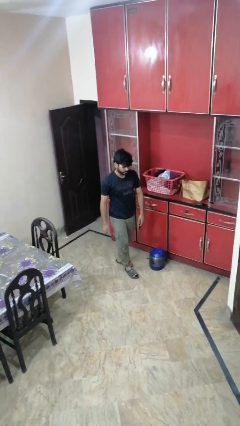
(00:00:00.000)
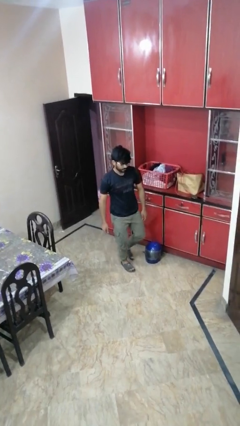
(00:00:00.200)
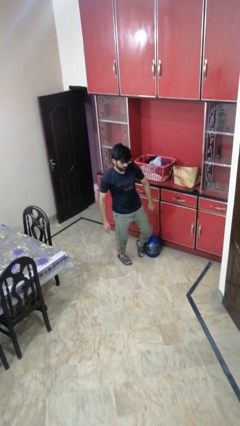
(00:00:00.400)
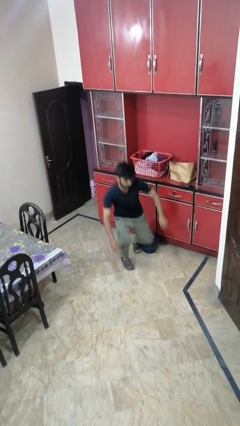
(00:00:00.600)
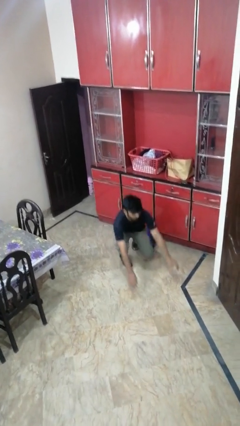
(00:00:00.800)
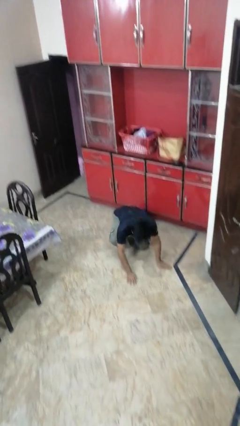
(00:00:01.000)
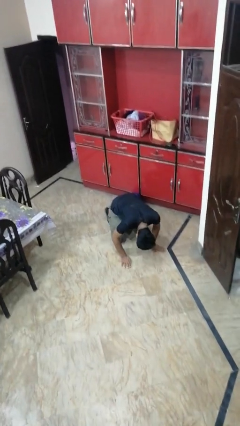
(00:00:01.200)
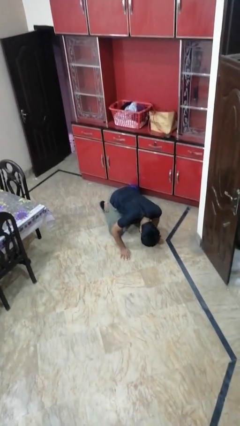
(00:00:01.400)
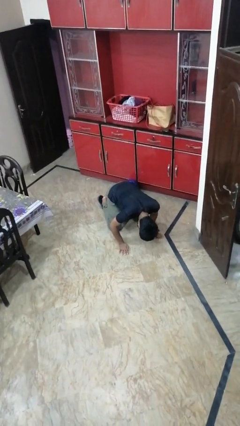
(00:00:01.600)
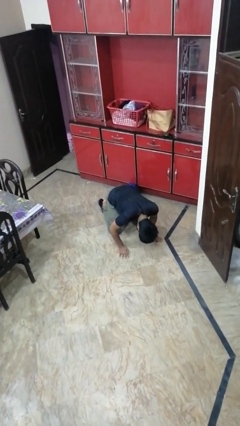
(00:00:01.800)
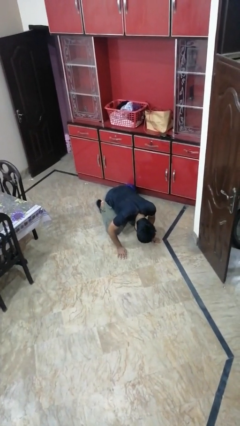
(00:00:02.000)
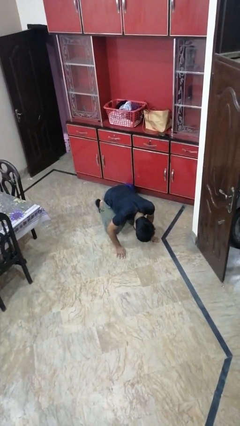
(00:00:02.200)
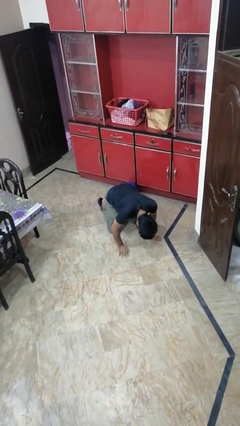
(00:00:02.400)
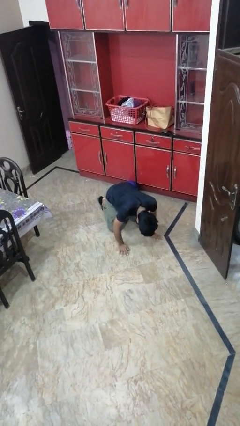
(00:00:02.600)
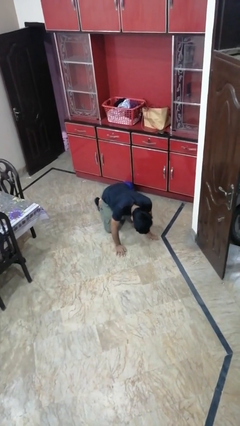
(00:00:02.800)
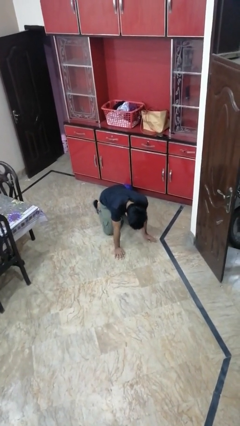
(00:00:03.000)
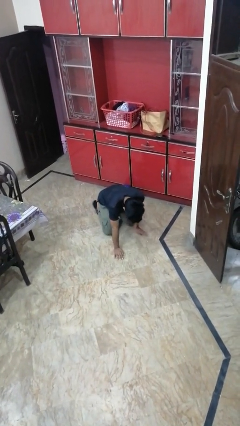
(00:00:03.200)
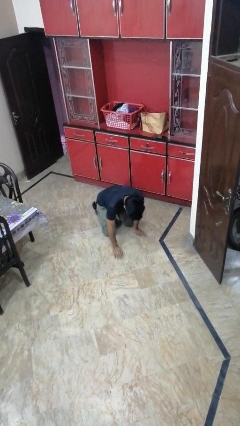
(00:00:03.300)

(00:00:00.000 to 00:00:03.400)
person trips on object on floor

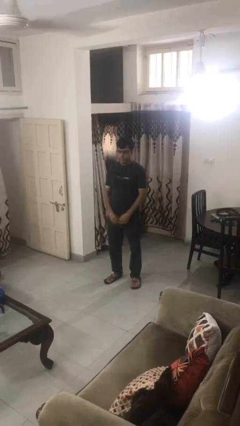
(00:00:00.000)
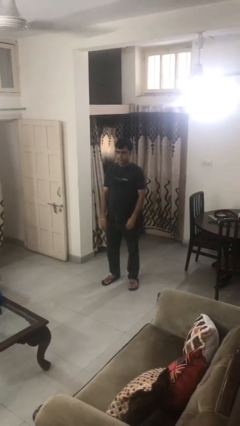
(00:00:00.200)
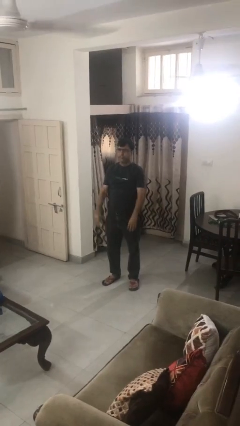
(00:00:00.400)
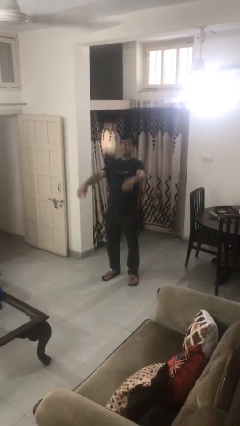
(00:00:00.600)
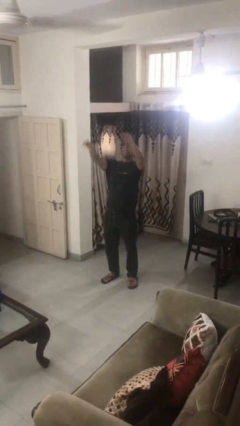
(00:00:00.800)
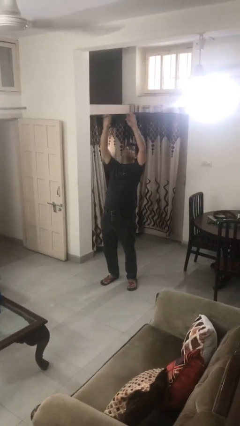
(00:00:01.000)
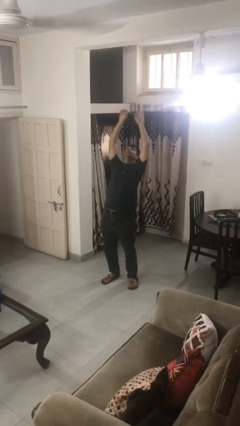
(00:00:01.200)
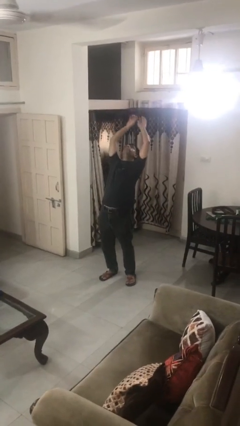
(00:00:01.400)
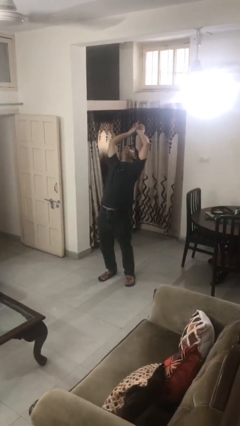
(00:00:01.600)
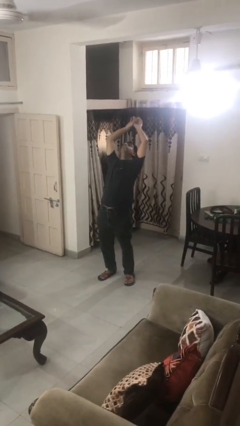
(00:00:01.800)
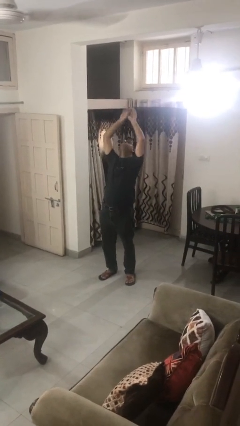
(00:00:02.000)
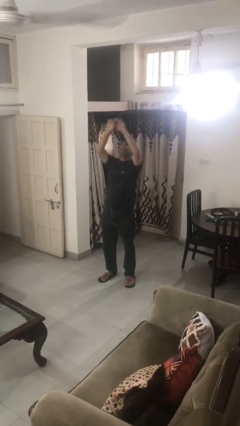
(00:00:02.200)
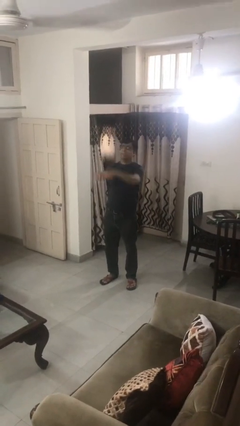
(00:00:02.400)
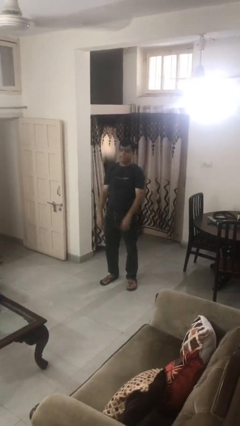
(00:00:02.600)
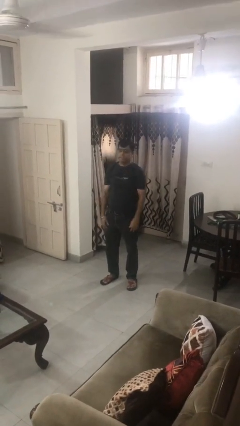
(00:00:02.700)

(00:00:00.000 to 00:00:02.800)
person stretches back

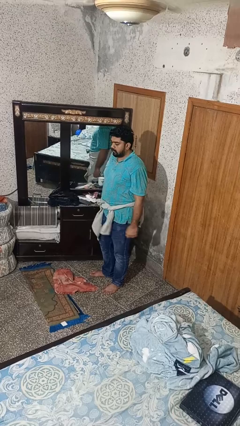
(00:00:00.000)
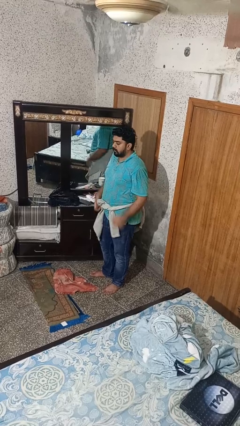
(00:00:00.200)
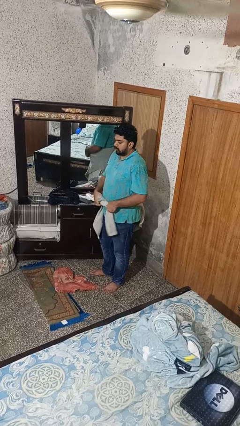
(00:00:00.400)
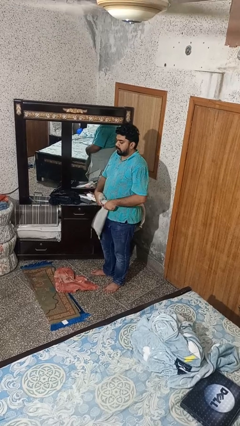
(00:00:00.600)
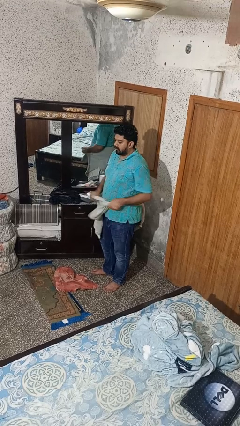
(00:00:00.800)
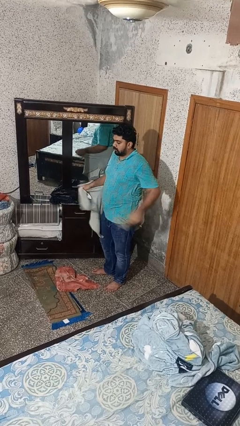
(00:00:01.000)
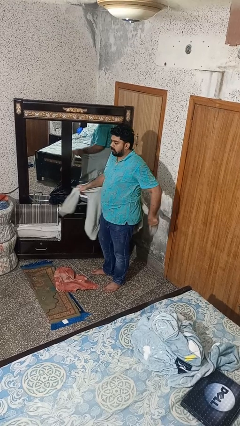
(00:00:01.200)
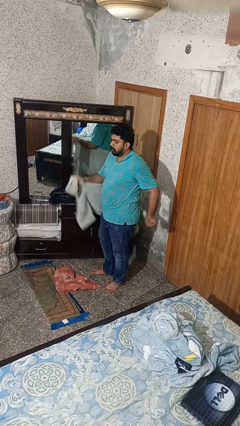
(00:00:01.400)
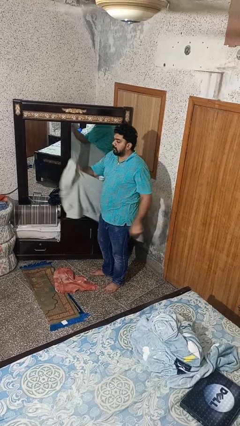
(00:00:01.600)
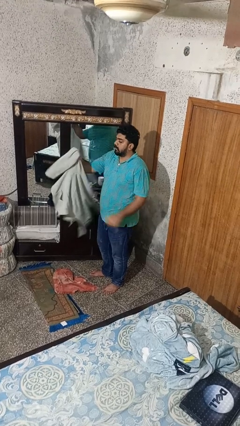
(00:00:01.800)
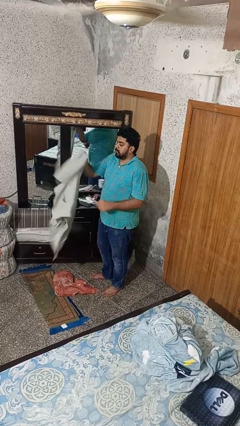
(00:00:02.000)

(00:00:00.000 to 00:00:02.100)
person unties jacket around waist

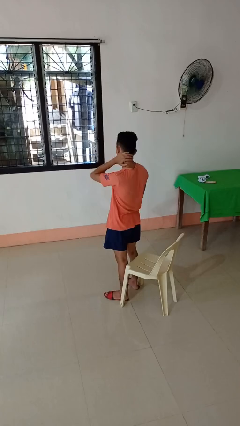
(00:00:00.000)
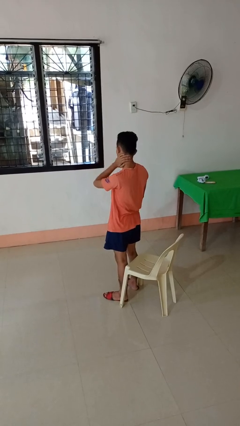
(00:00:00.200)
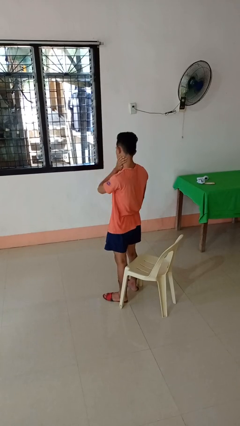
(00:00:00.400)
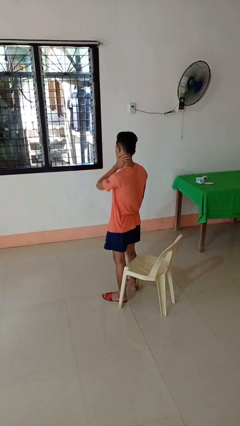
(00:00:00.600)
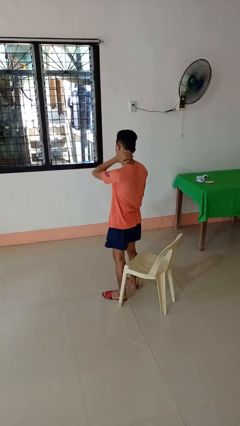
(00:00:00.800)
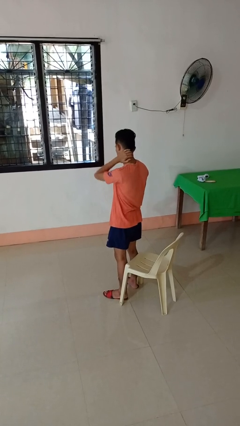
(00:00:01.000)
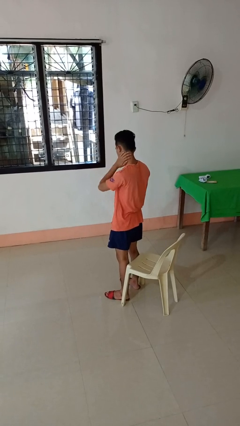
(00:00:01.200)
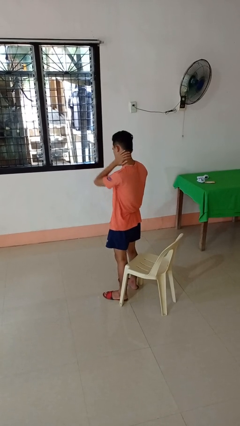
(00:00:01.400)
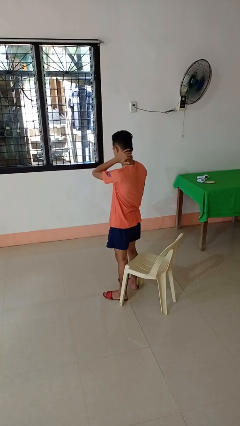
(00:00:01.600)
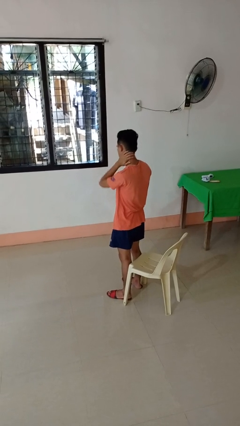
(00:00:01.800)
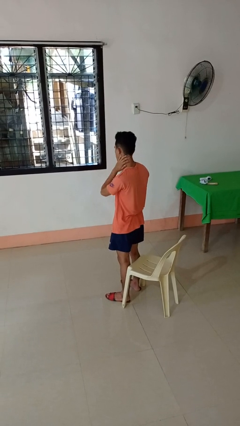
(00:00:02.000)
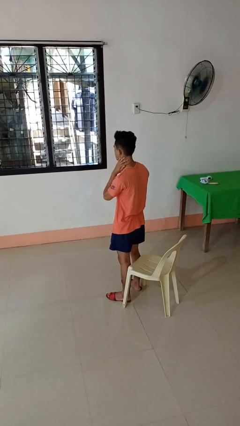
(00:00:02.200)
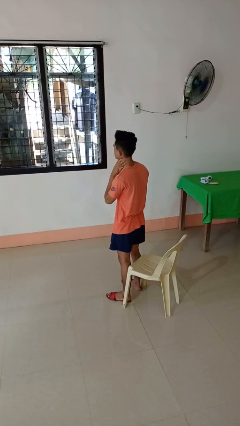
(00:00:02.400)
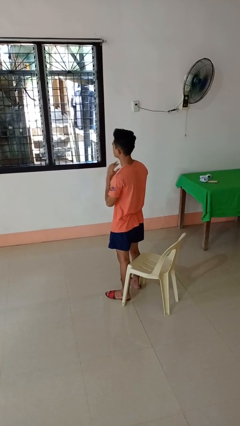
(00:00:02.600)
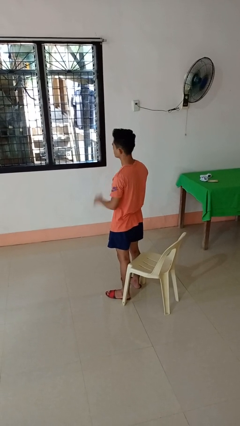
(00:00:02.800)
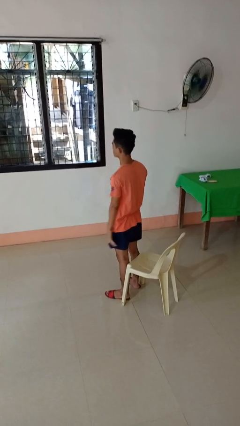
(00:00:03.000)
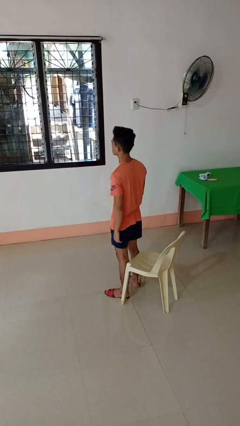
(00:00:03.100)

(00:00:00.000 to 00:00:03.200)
person rubs neck

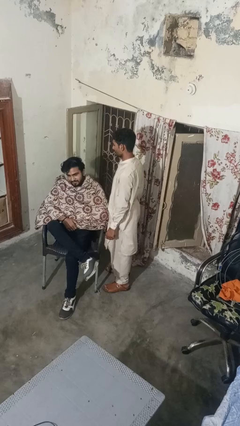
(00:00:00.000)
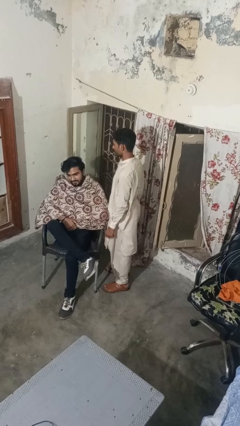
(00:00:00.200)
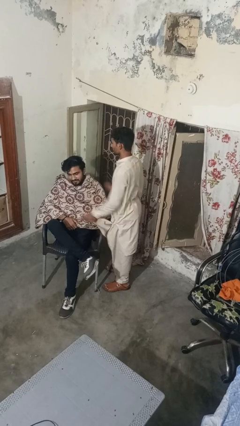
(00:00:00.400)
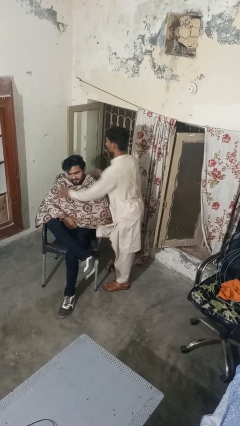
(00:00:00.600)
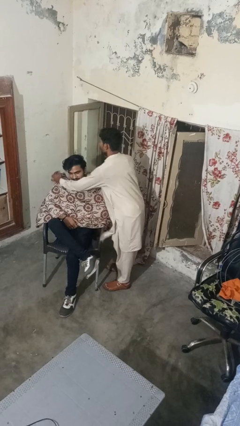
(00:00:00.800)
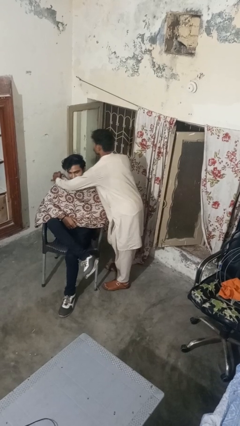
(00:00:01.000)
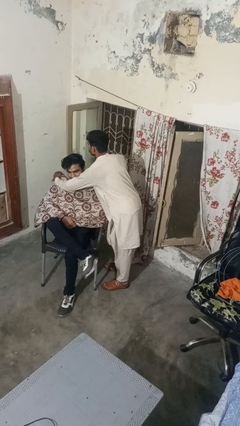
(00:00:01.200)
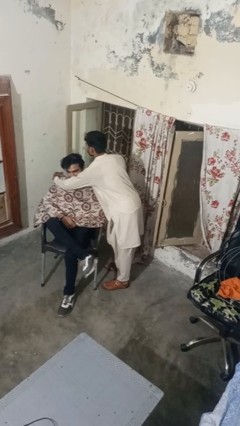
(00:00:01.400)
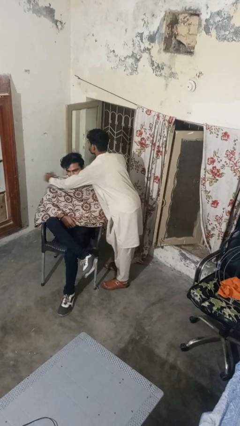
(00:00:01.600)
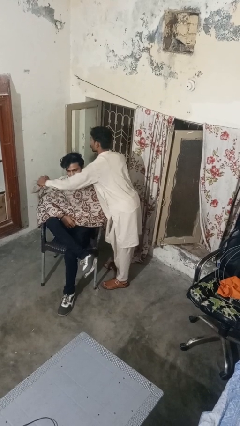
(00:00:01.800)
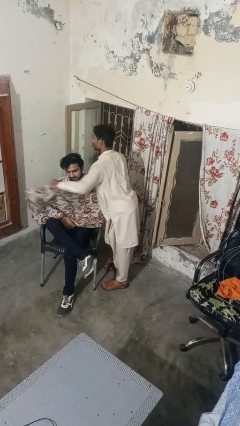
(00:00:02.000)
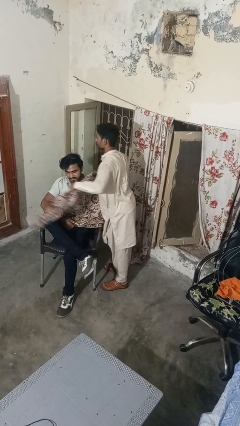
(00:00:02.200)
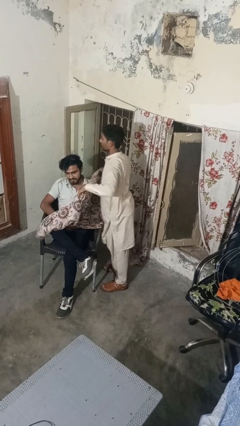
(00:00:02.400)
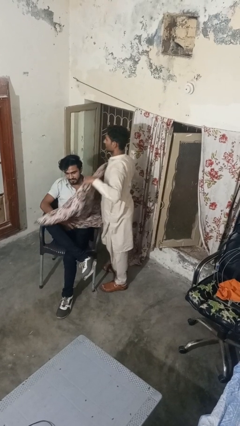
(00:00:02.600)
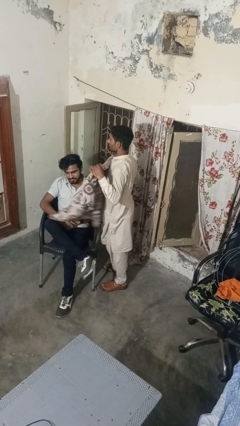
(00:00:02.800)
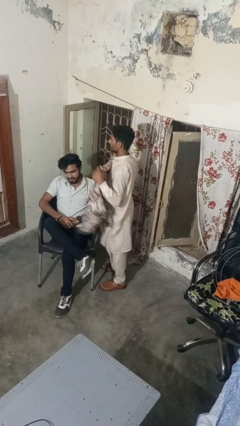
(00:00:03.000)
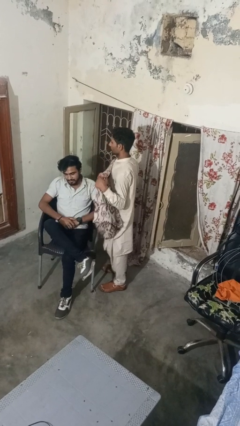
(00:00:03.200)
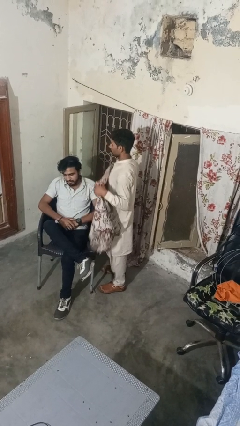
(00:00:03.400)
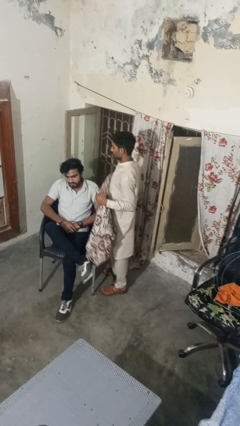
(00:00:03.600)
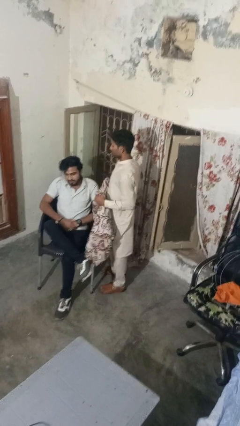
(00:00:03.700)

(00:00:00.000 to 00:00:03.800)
person uncovers friend with blanket

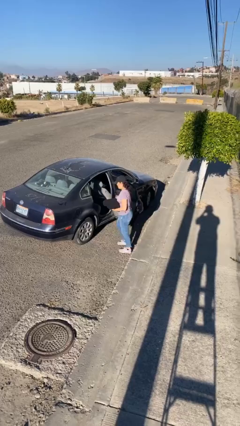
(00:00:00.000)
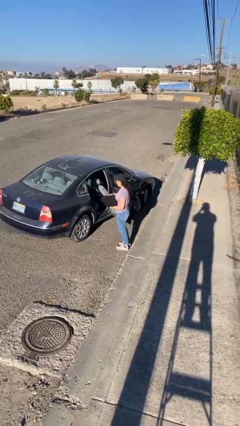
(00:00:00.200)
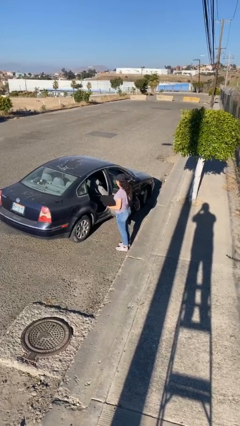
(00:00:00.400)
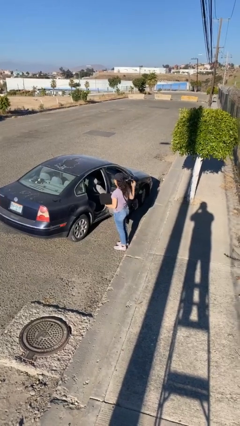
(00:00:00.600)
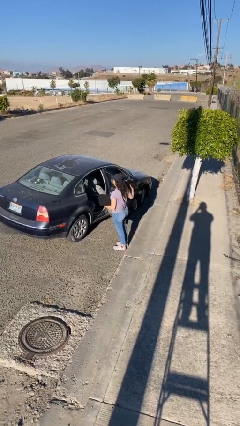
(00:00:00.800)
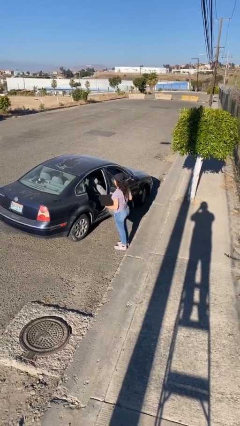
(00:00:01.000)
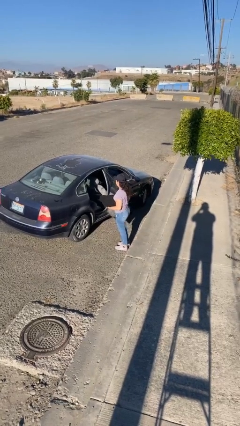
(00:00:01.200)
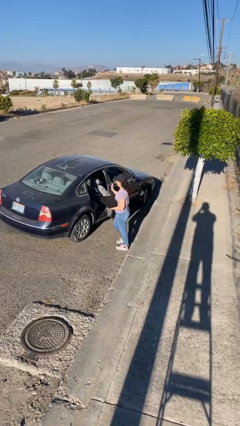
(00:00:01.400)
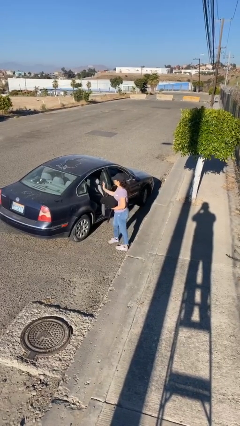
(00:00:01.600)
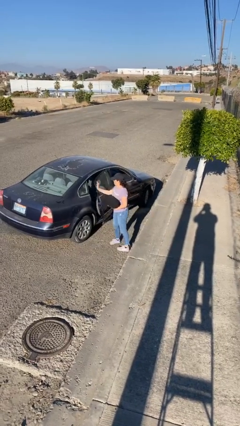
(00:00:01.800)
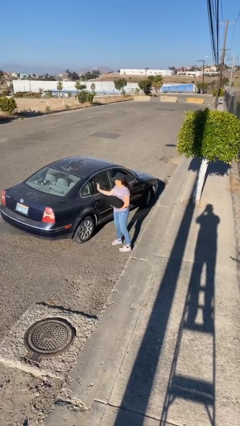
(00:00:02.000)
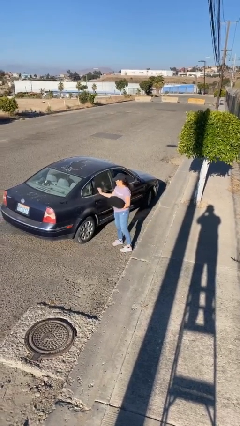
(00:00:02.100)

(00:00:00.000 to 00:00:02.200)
person closes car door
